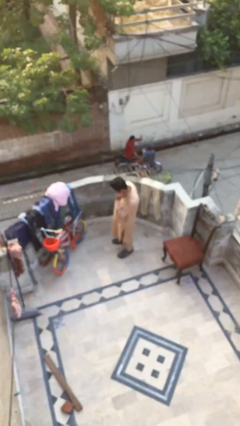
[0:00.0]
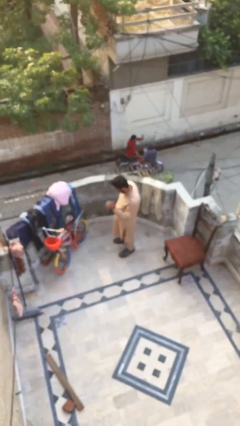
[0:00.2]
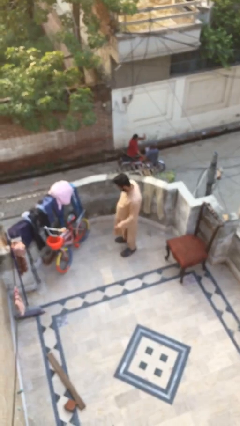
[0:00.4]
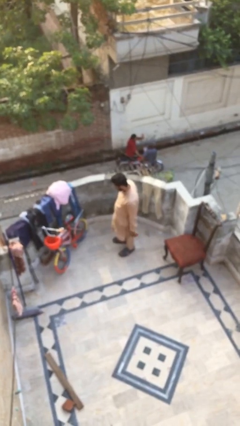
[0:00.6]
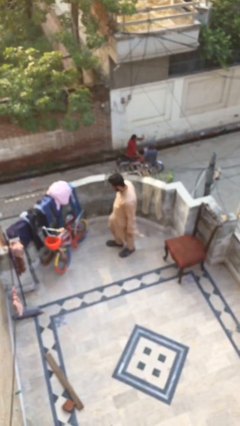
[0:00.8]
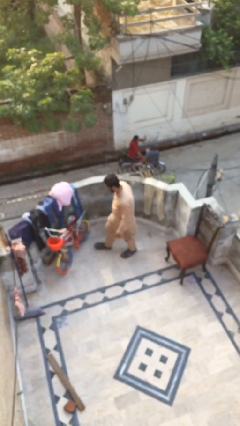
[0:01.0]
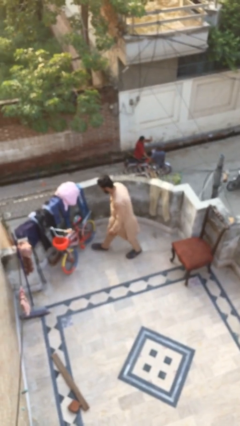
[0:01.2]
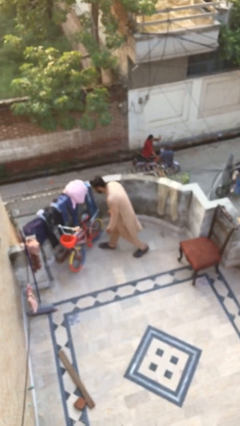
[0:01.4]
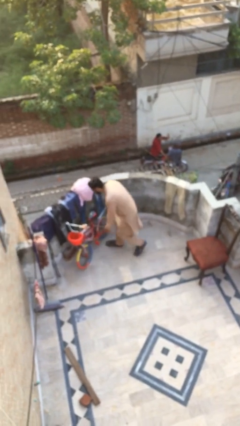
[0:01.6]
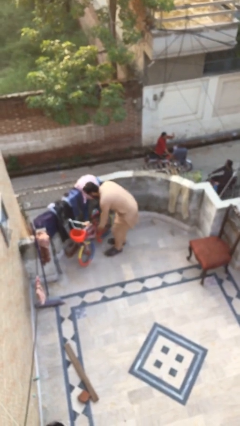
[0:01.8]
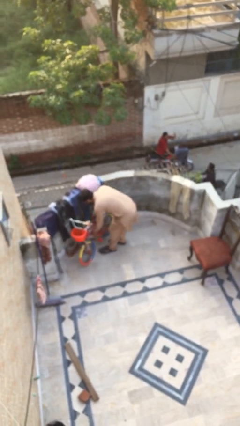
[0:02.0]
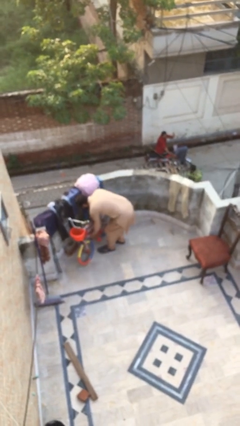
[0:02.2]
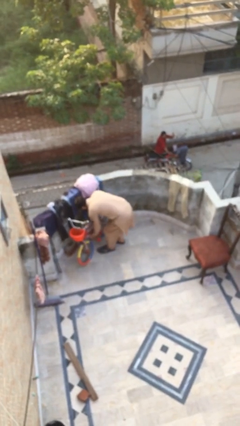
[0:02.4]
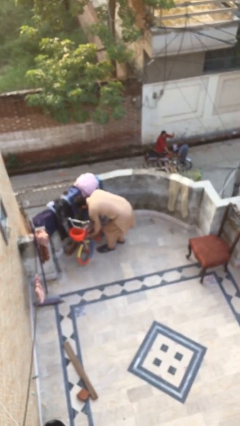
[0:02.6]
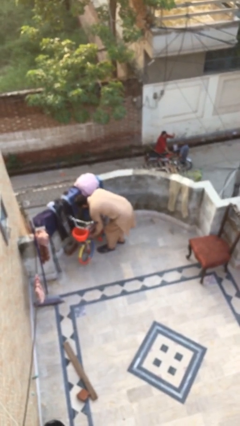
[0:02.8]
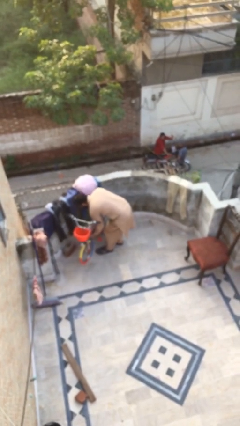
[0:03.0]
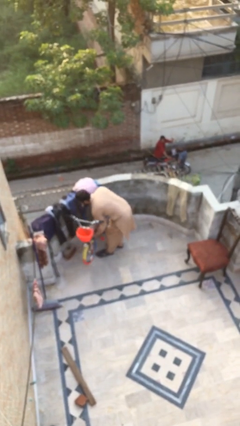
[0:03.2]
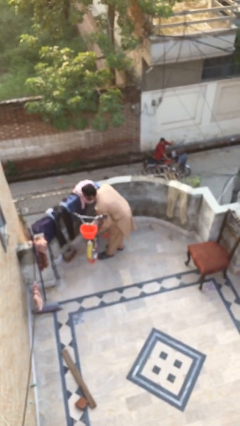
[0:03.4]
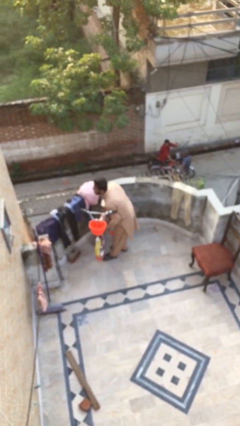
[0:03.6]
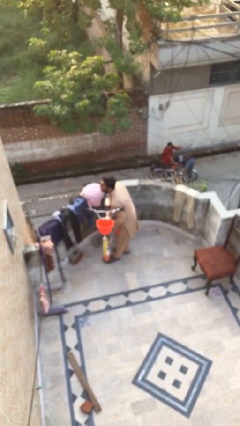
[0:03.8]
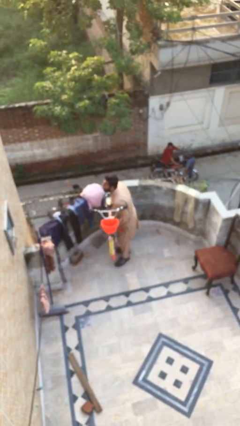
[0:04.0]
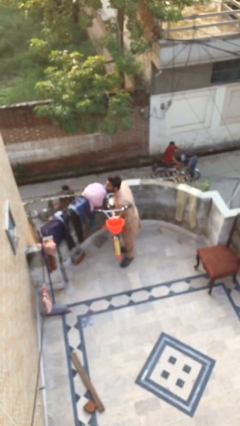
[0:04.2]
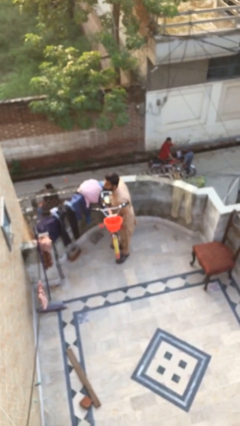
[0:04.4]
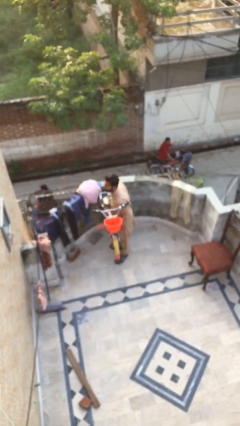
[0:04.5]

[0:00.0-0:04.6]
person picks up object from floor

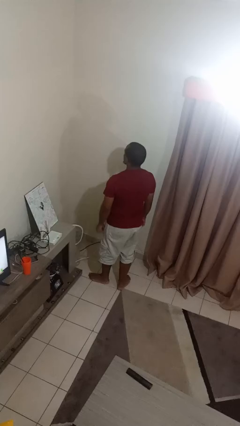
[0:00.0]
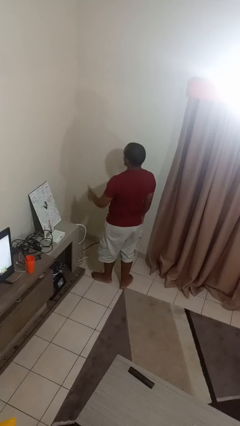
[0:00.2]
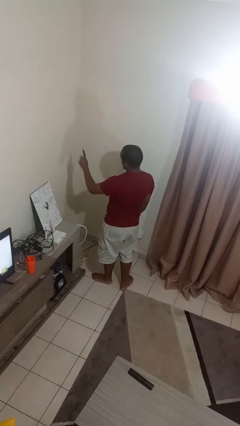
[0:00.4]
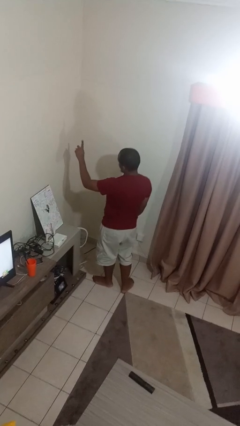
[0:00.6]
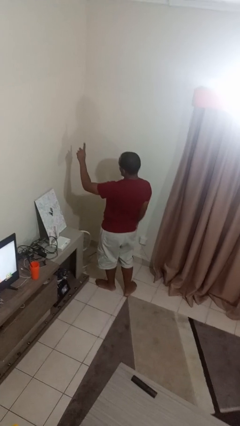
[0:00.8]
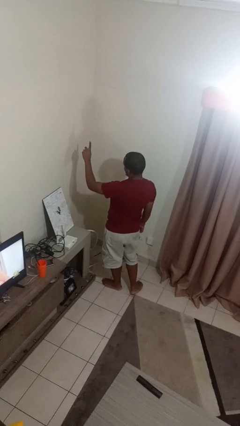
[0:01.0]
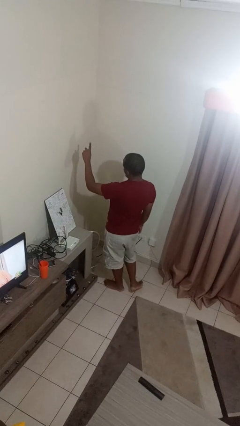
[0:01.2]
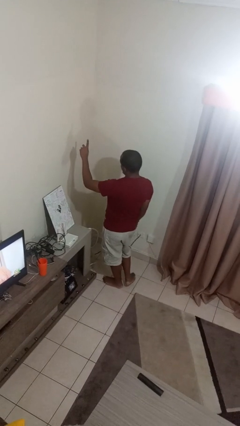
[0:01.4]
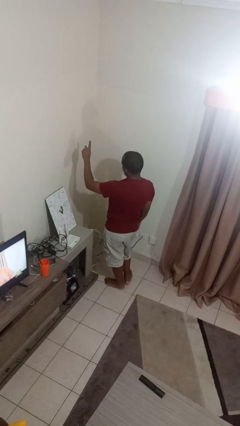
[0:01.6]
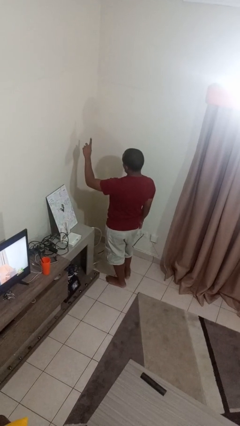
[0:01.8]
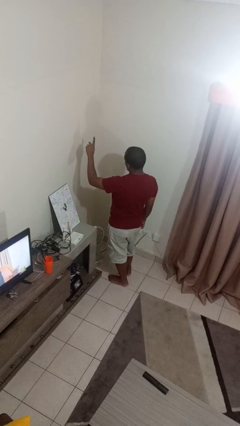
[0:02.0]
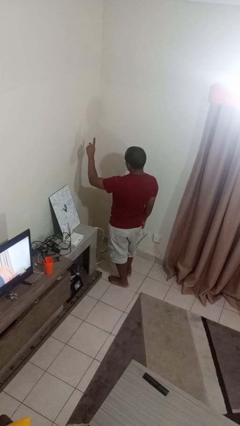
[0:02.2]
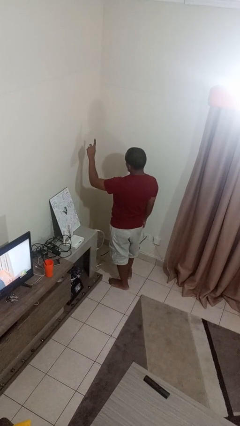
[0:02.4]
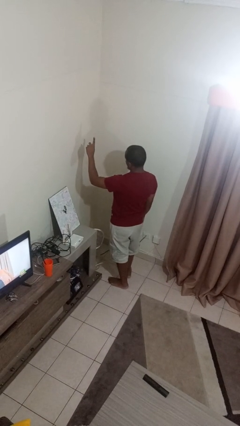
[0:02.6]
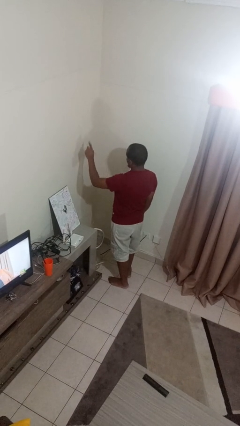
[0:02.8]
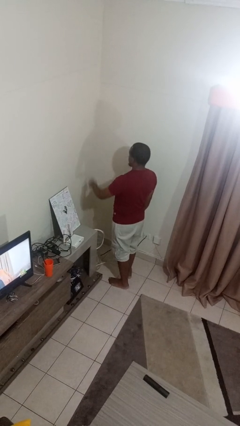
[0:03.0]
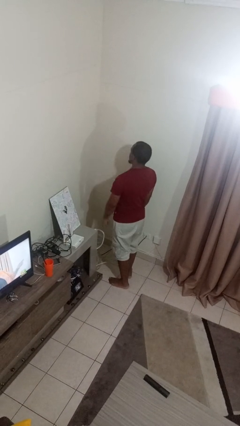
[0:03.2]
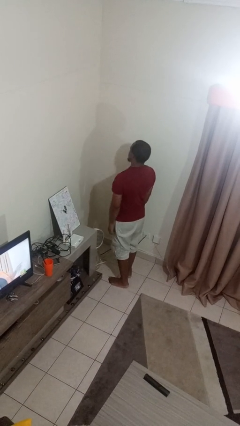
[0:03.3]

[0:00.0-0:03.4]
person gestures number one

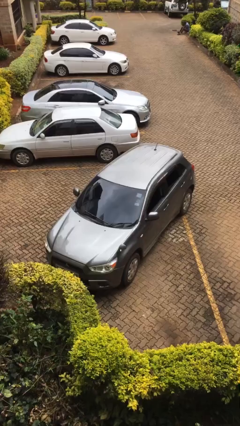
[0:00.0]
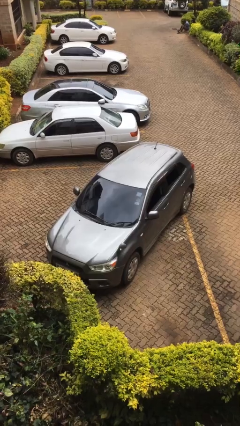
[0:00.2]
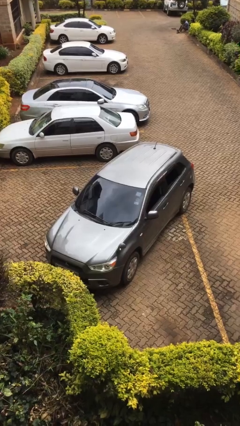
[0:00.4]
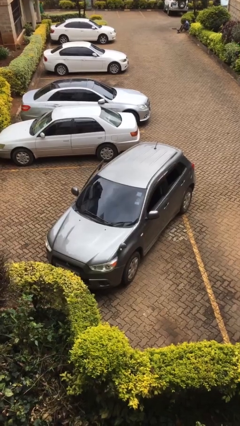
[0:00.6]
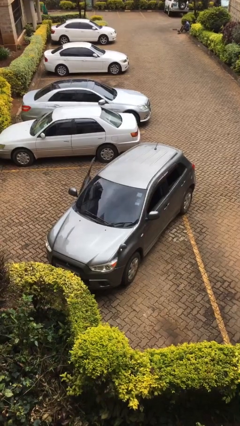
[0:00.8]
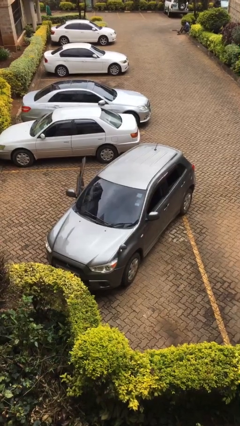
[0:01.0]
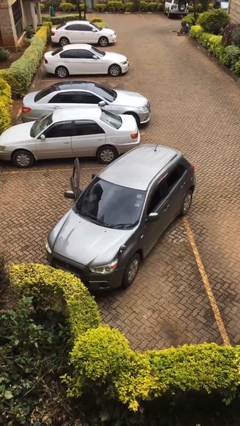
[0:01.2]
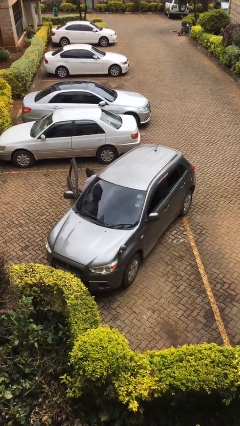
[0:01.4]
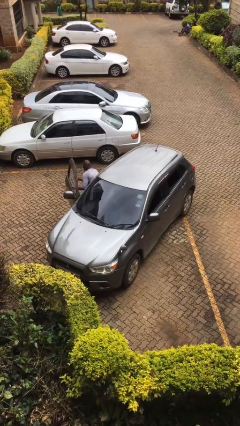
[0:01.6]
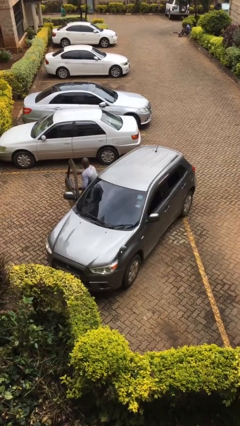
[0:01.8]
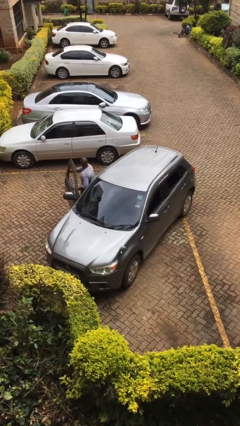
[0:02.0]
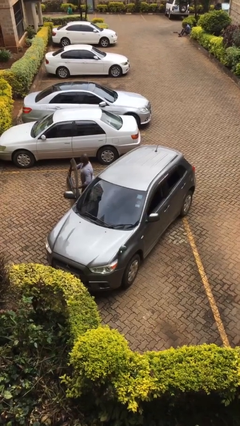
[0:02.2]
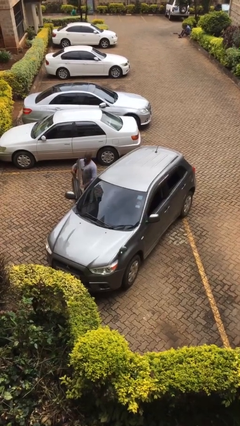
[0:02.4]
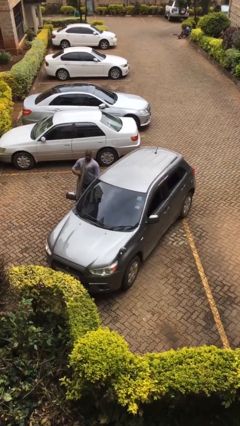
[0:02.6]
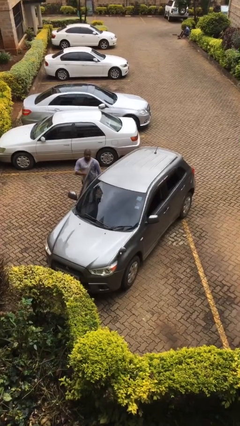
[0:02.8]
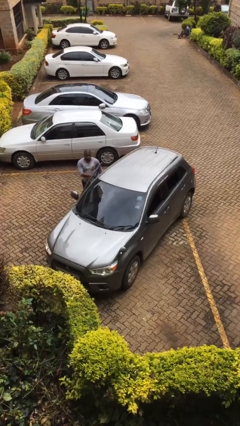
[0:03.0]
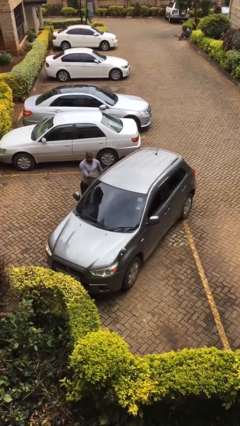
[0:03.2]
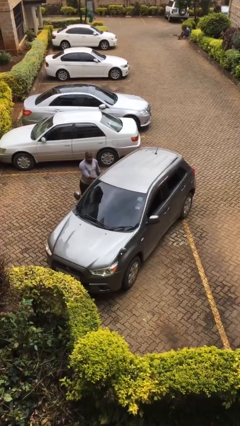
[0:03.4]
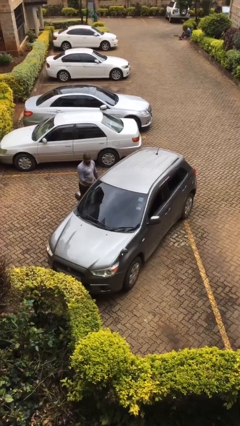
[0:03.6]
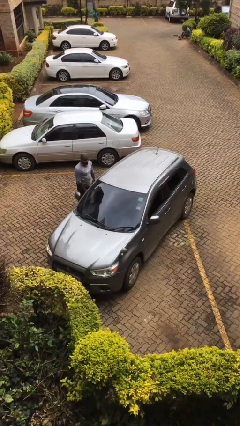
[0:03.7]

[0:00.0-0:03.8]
car drops off person

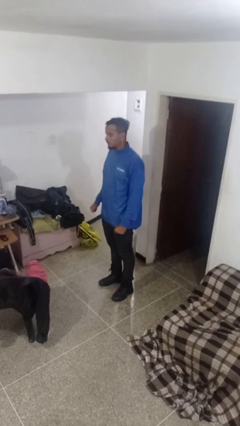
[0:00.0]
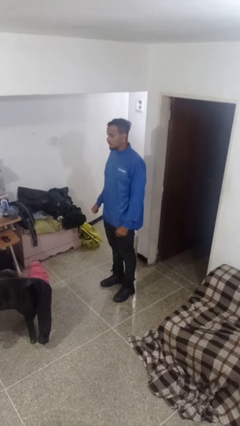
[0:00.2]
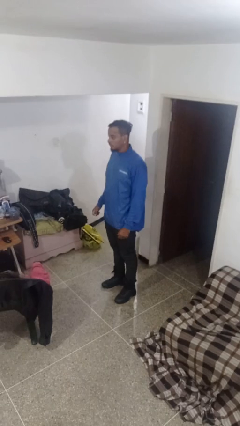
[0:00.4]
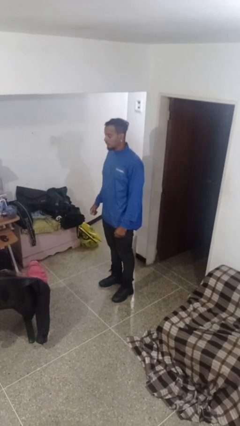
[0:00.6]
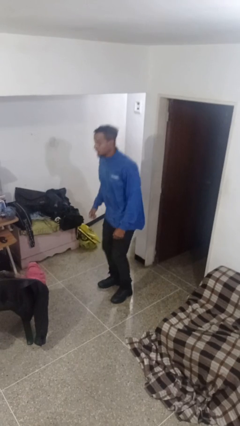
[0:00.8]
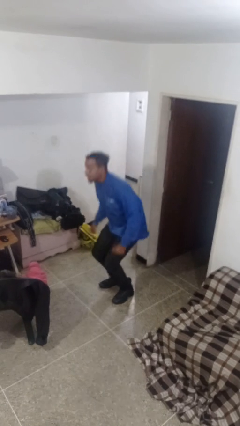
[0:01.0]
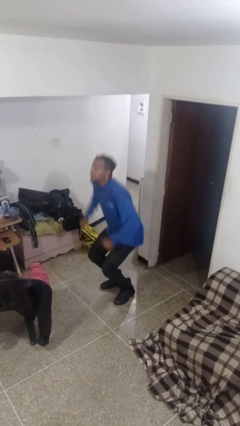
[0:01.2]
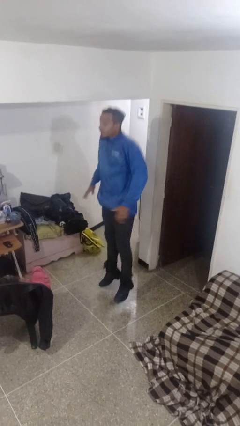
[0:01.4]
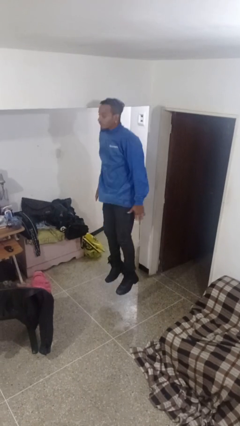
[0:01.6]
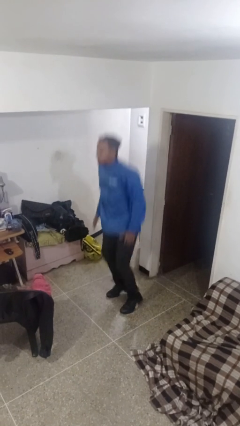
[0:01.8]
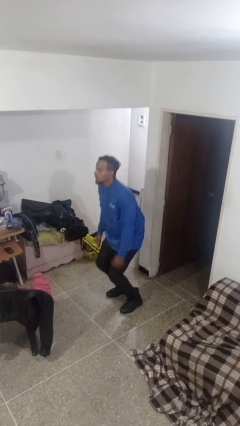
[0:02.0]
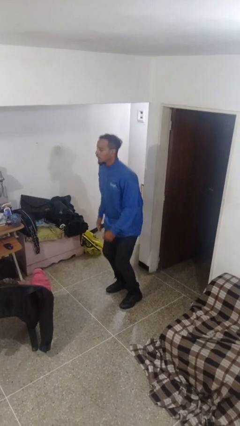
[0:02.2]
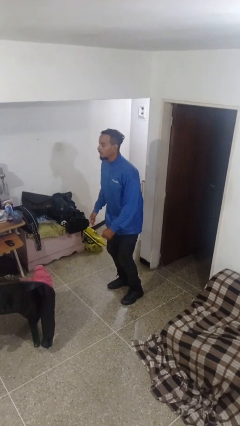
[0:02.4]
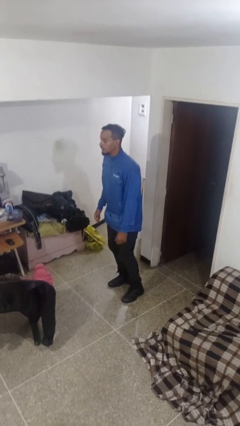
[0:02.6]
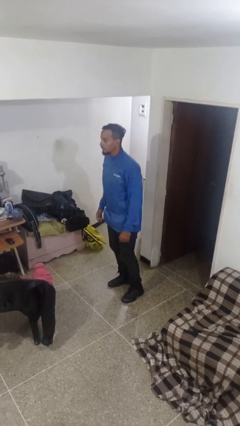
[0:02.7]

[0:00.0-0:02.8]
person jumps

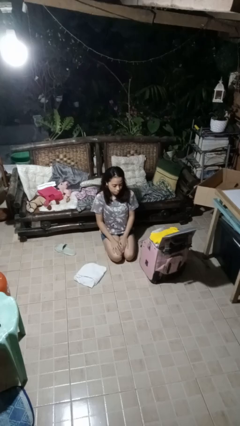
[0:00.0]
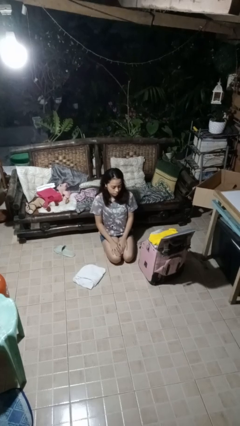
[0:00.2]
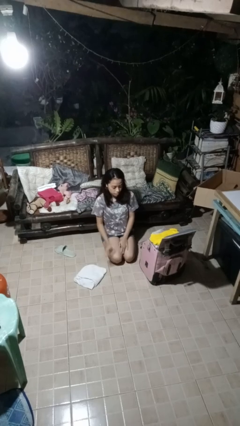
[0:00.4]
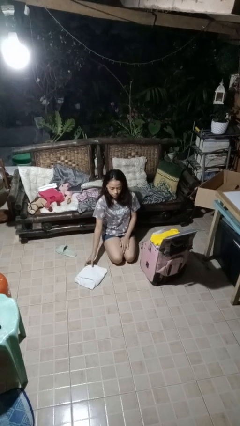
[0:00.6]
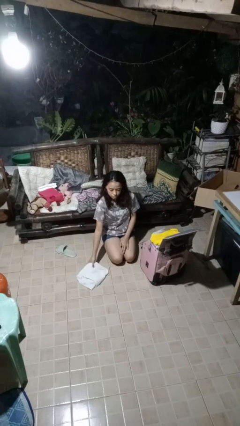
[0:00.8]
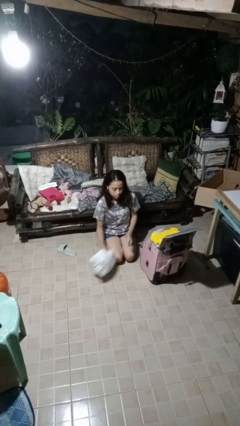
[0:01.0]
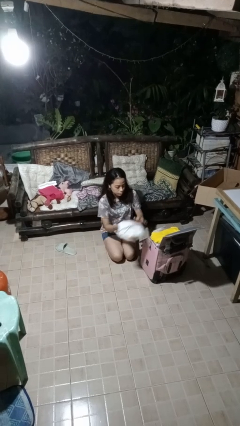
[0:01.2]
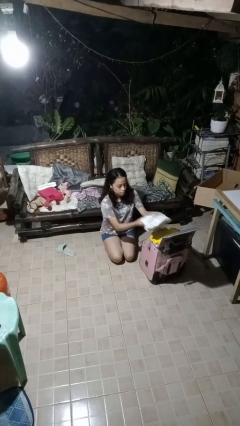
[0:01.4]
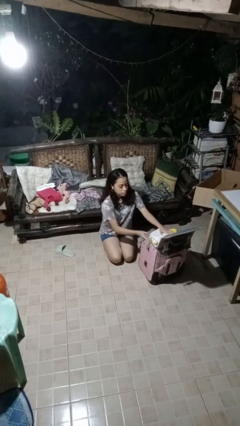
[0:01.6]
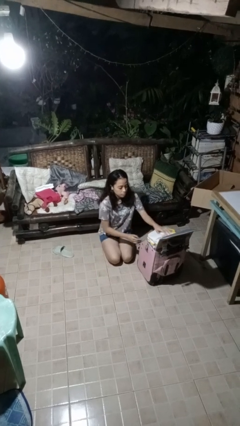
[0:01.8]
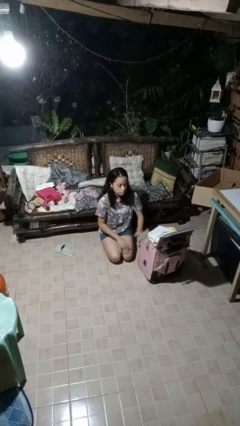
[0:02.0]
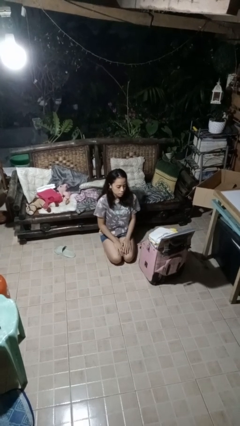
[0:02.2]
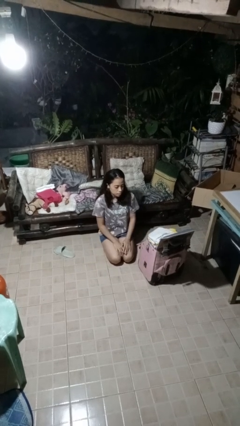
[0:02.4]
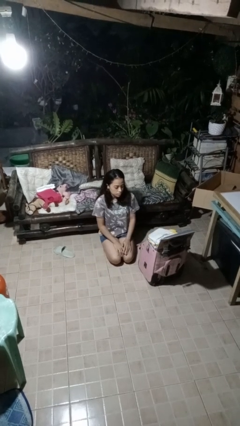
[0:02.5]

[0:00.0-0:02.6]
person loads clothes into suitcase
